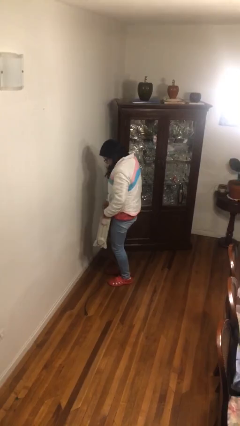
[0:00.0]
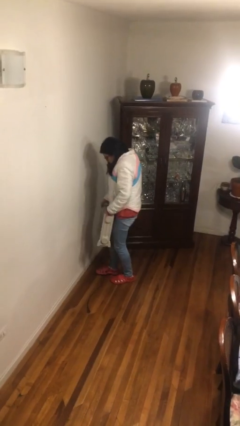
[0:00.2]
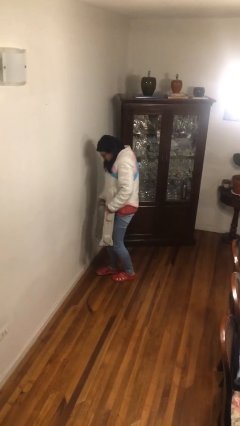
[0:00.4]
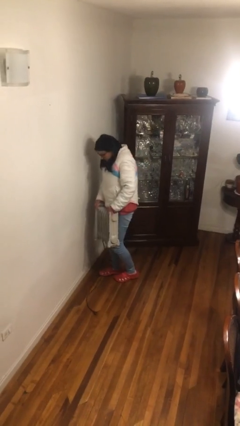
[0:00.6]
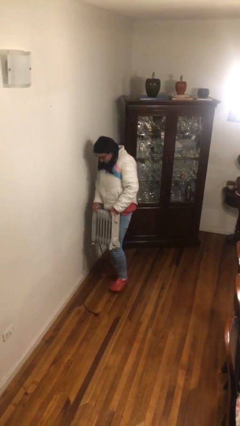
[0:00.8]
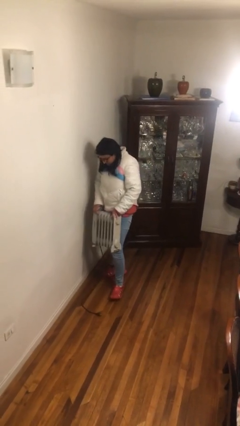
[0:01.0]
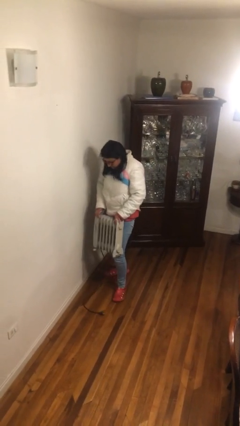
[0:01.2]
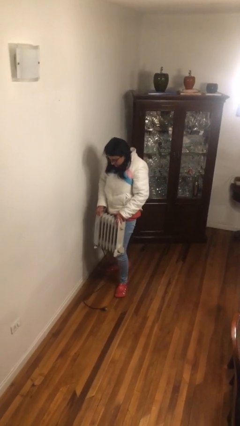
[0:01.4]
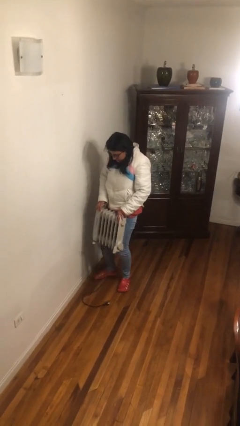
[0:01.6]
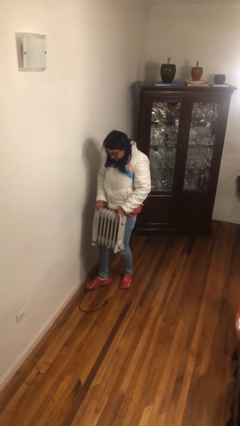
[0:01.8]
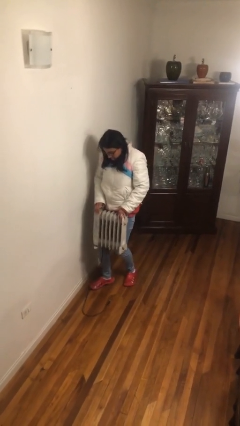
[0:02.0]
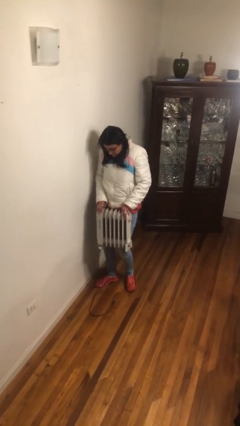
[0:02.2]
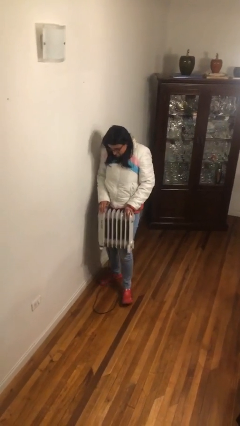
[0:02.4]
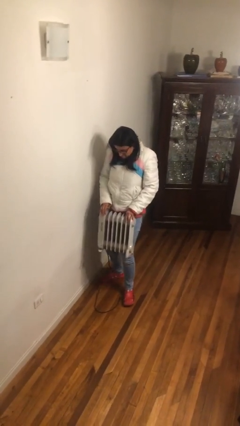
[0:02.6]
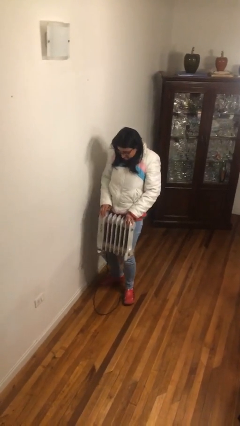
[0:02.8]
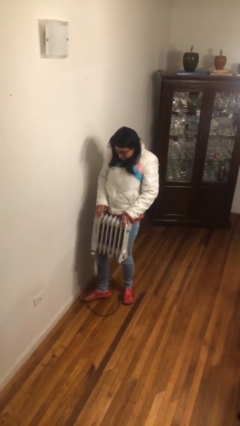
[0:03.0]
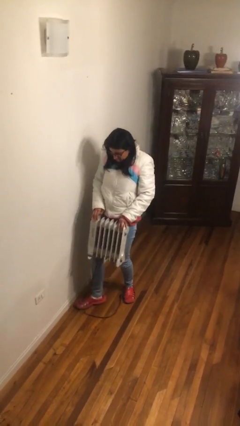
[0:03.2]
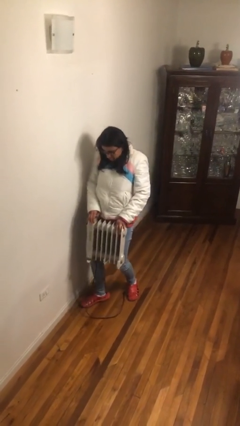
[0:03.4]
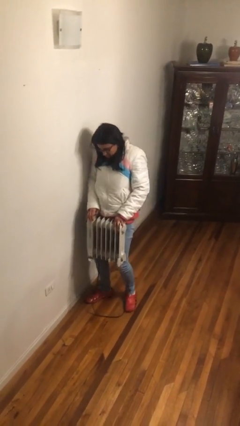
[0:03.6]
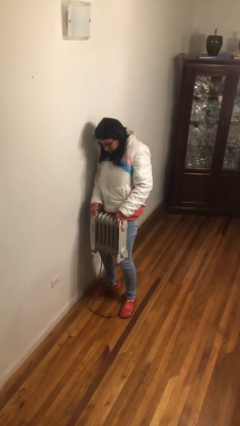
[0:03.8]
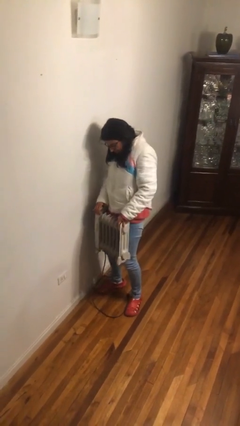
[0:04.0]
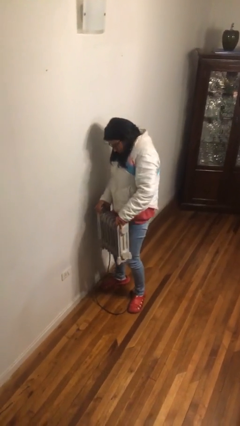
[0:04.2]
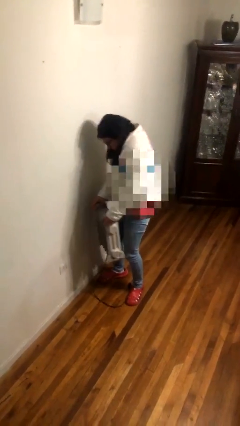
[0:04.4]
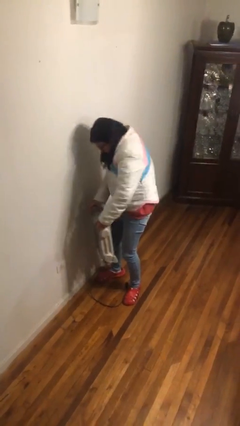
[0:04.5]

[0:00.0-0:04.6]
person carries heavy object

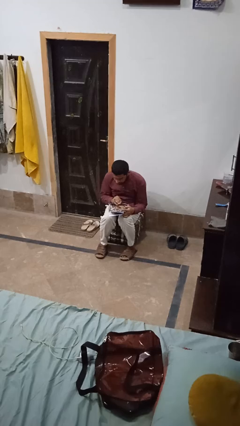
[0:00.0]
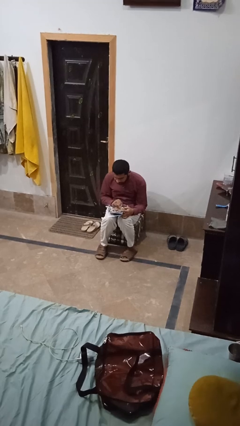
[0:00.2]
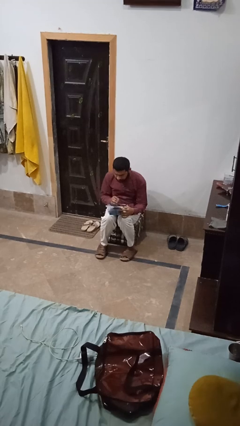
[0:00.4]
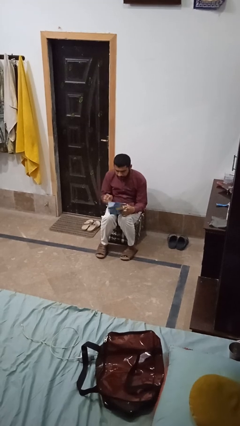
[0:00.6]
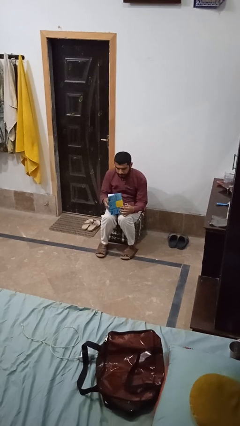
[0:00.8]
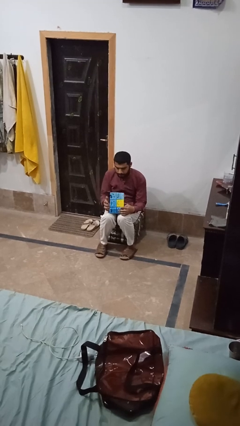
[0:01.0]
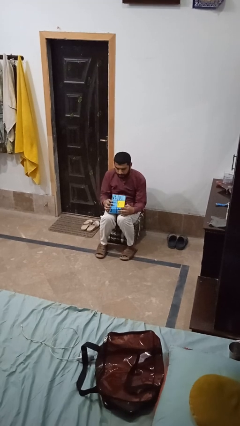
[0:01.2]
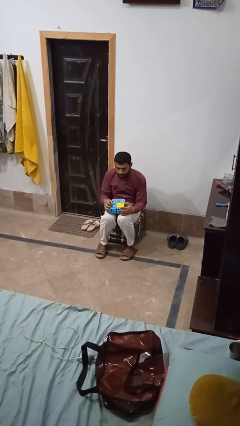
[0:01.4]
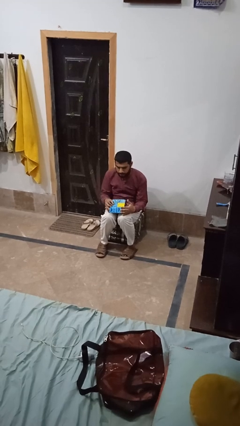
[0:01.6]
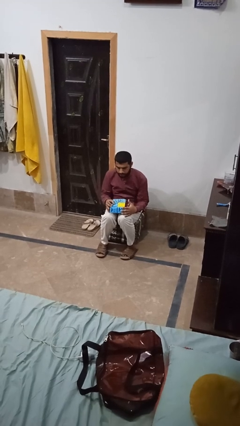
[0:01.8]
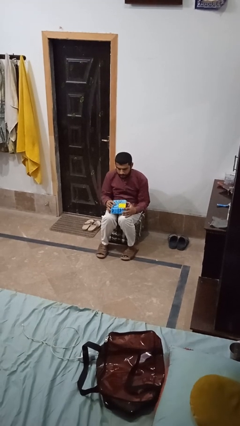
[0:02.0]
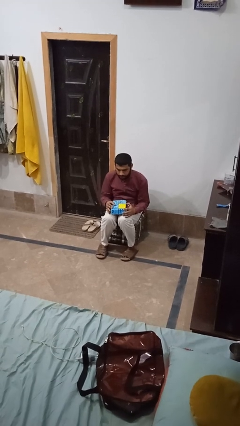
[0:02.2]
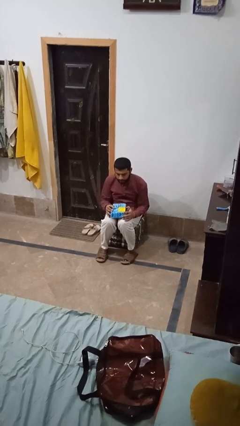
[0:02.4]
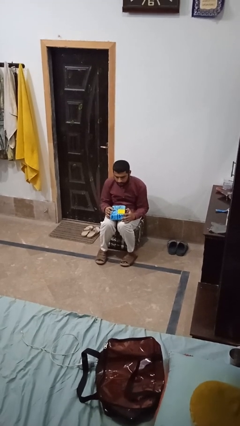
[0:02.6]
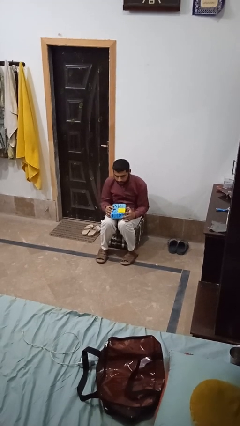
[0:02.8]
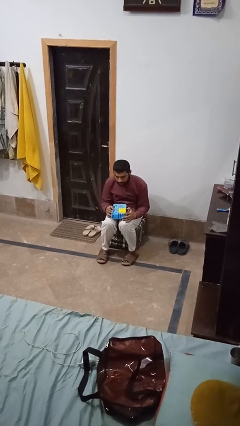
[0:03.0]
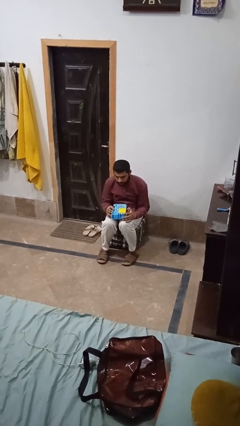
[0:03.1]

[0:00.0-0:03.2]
person closes jewelry box

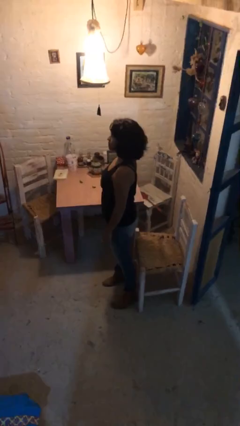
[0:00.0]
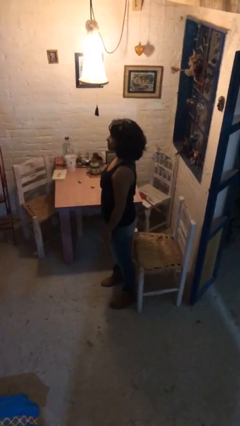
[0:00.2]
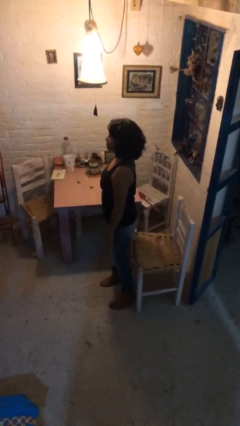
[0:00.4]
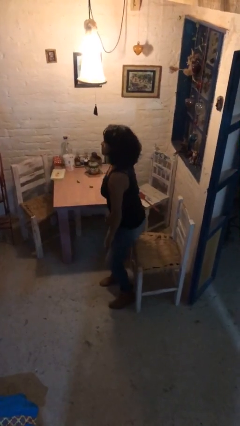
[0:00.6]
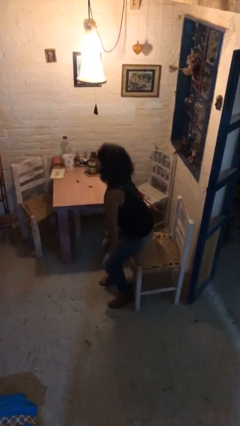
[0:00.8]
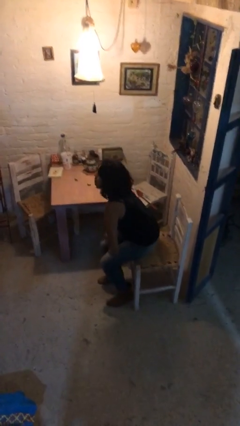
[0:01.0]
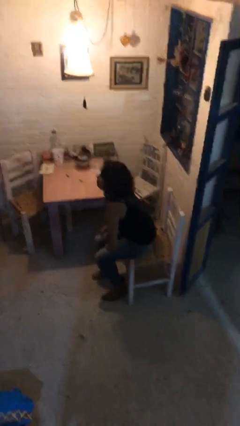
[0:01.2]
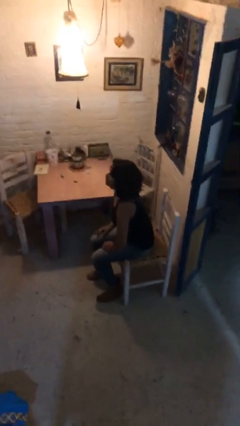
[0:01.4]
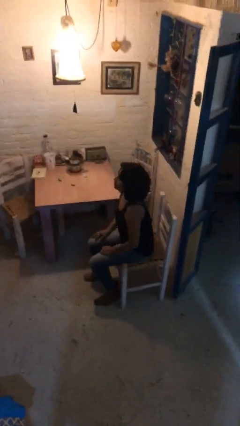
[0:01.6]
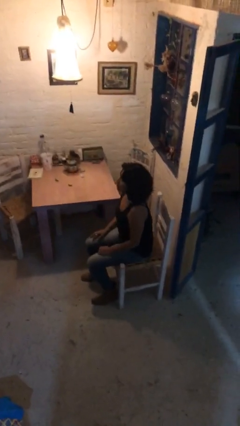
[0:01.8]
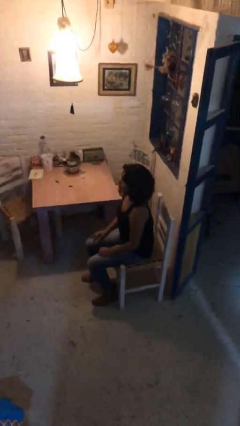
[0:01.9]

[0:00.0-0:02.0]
person sits down

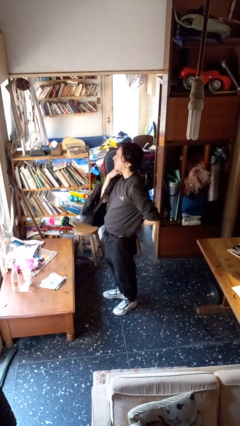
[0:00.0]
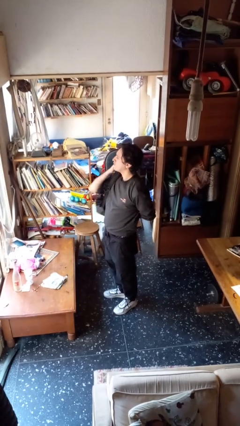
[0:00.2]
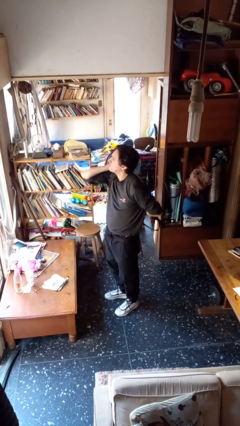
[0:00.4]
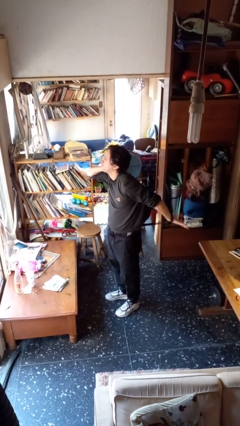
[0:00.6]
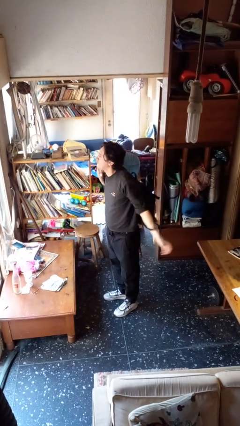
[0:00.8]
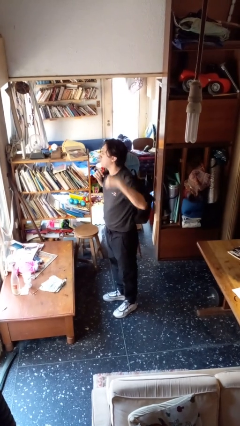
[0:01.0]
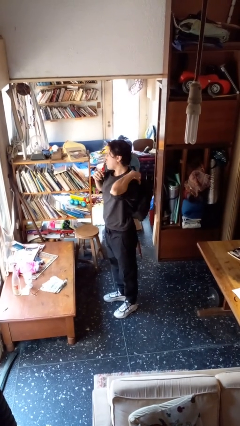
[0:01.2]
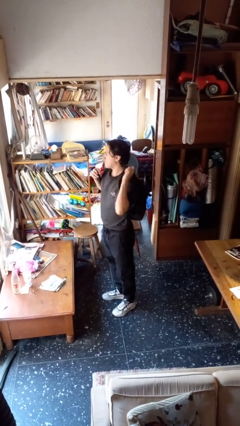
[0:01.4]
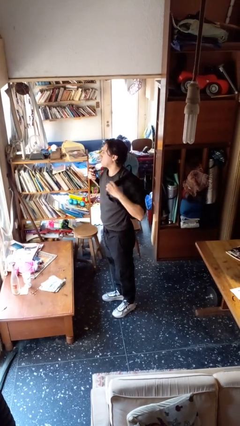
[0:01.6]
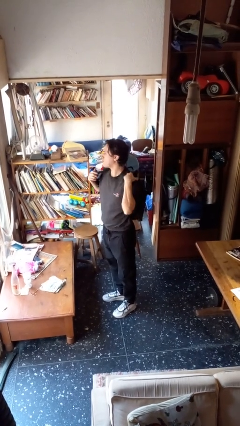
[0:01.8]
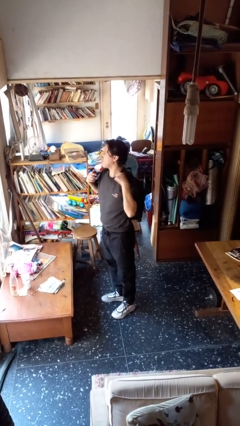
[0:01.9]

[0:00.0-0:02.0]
person puts on backpack

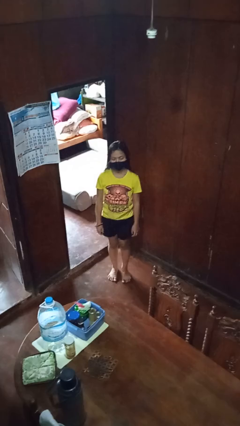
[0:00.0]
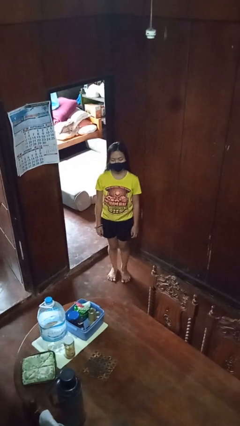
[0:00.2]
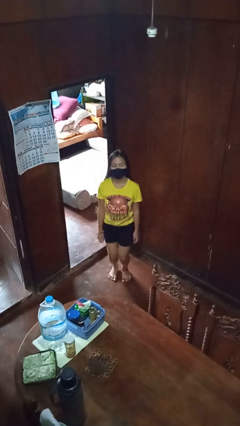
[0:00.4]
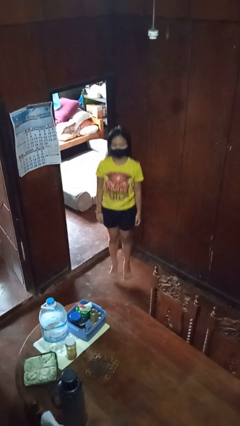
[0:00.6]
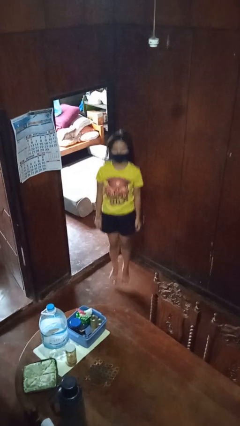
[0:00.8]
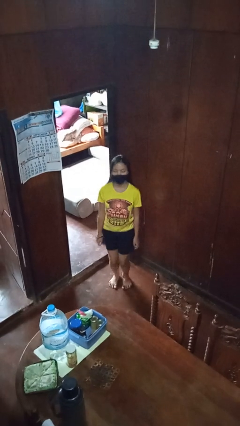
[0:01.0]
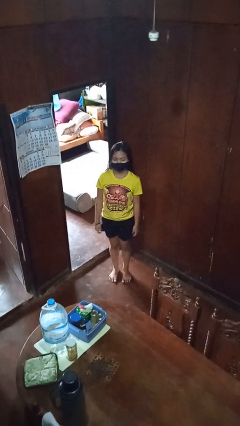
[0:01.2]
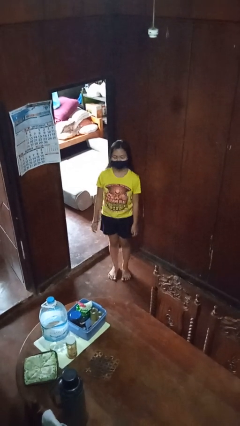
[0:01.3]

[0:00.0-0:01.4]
person jumps

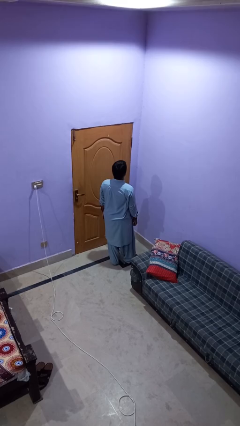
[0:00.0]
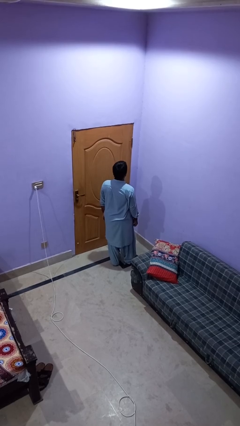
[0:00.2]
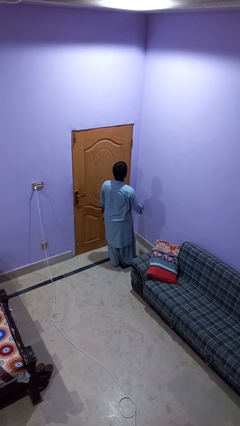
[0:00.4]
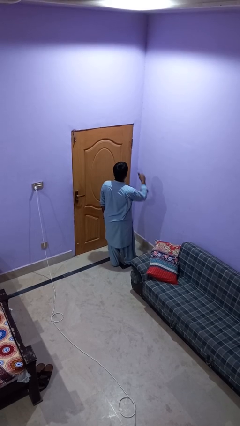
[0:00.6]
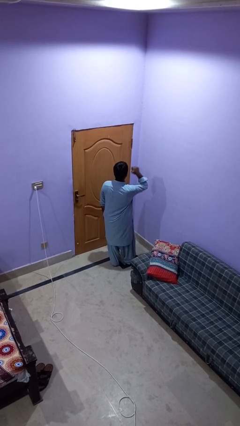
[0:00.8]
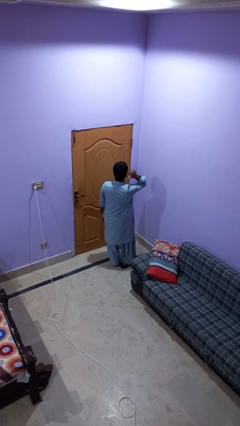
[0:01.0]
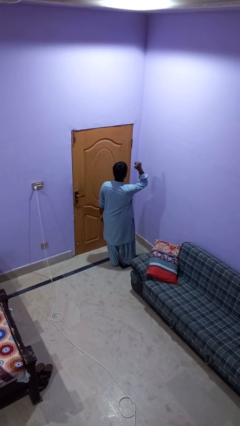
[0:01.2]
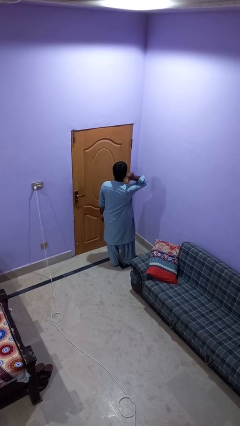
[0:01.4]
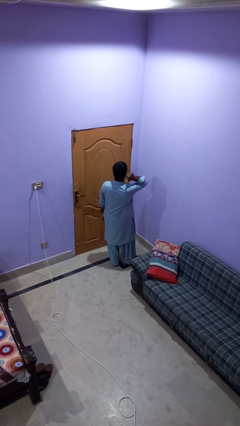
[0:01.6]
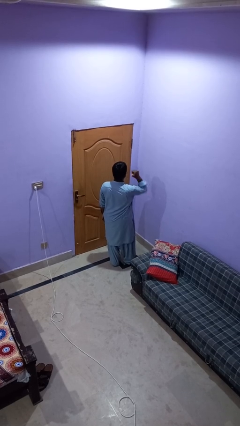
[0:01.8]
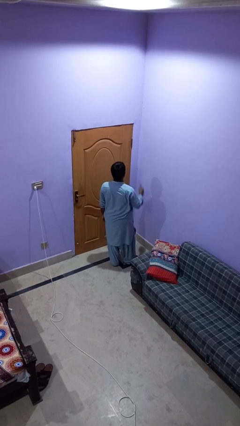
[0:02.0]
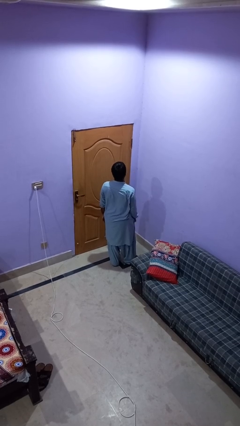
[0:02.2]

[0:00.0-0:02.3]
person gestures behind me

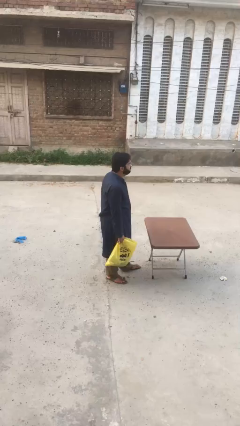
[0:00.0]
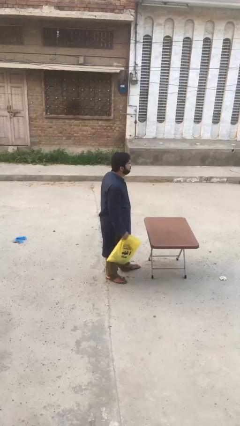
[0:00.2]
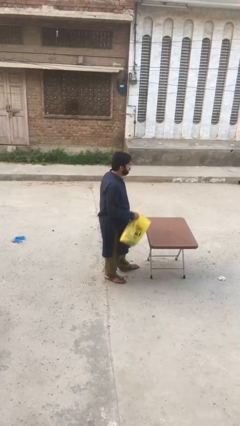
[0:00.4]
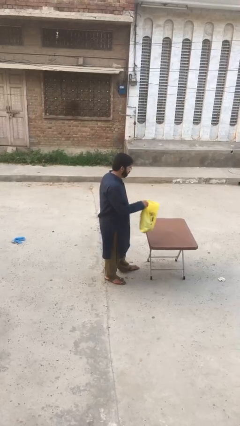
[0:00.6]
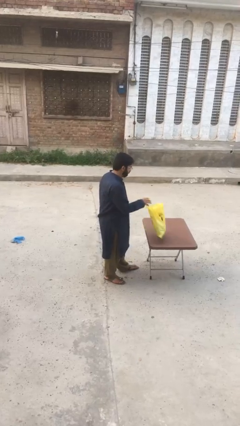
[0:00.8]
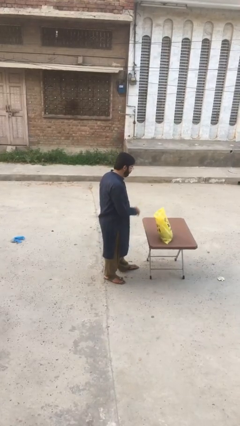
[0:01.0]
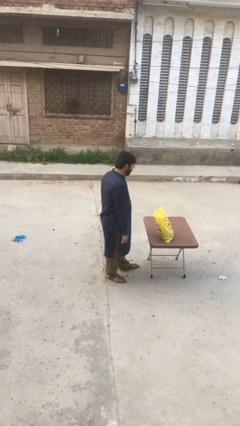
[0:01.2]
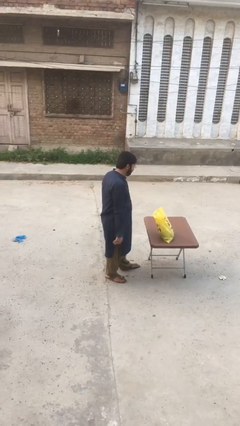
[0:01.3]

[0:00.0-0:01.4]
person puts down object on table
